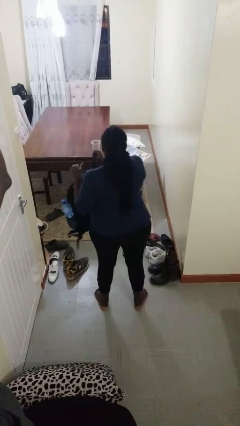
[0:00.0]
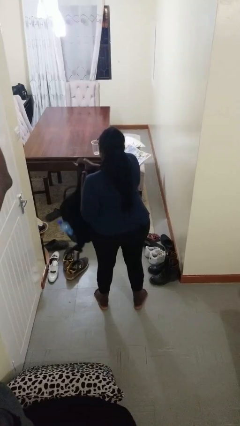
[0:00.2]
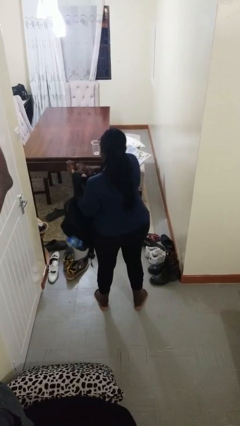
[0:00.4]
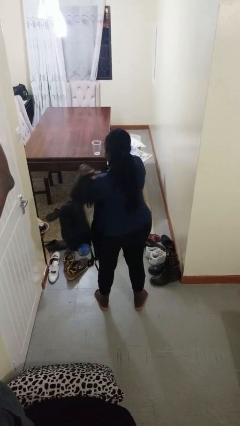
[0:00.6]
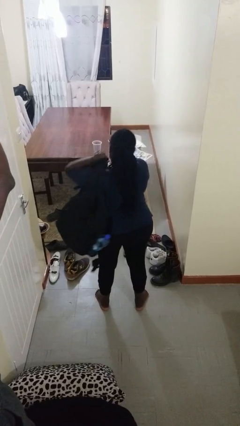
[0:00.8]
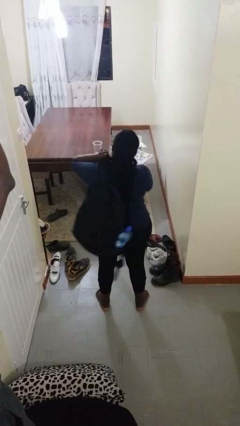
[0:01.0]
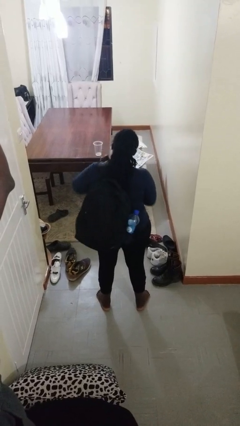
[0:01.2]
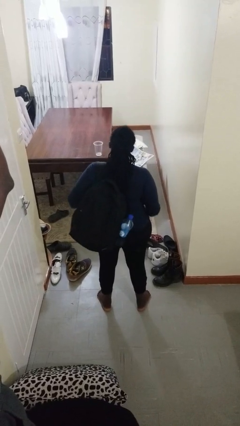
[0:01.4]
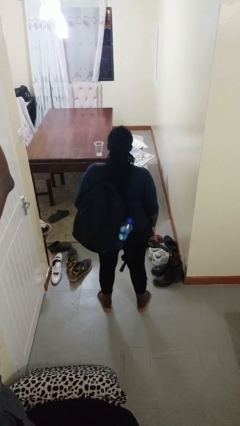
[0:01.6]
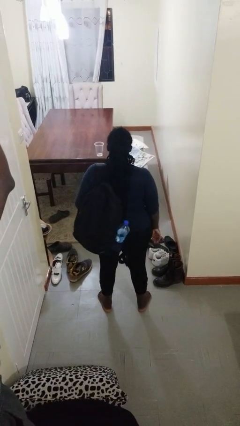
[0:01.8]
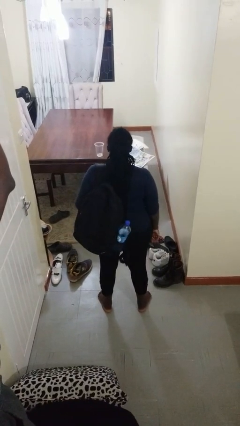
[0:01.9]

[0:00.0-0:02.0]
person puts on backpack

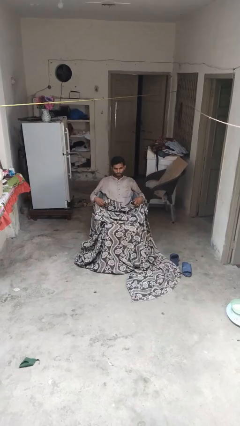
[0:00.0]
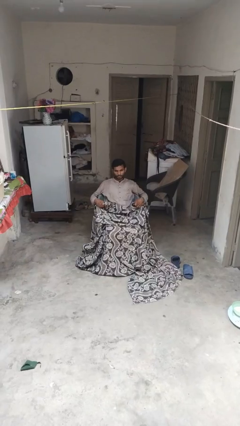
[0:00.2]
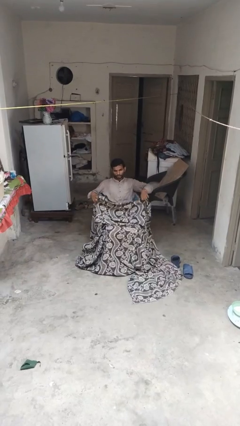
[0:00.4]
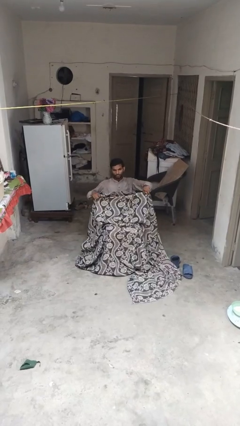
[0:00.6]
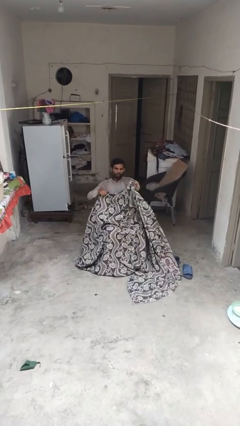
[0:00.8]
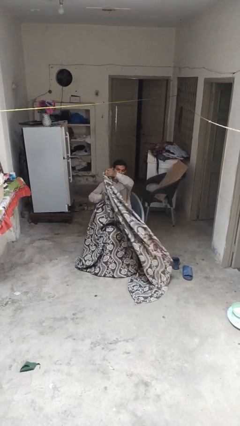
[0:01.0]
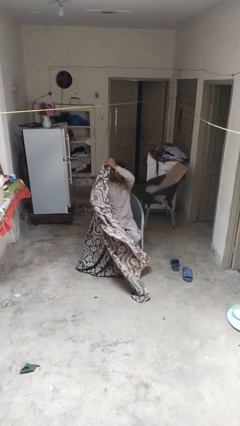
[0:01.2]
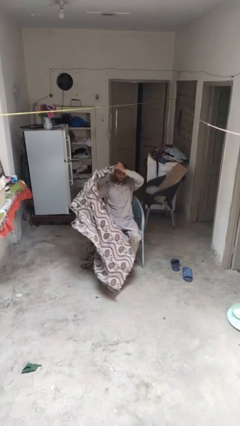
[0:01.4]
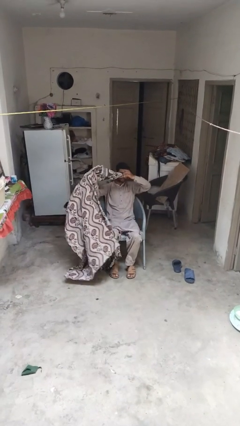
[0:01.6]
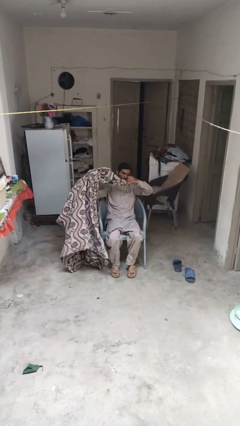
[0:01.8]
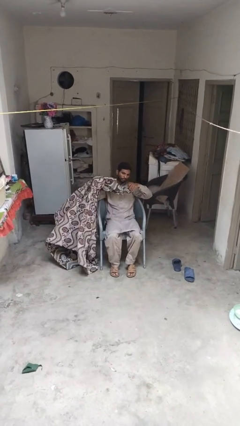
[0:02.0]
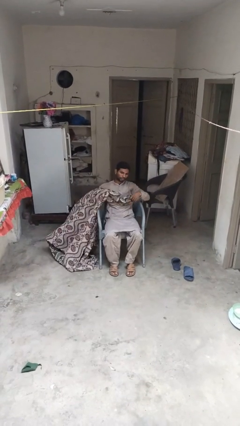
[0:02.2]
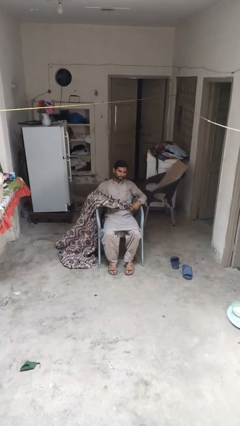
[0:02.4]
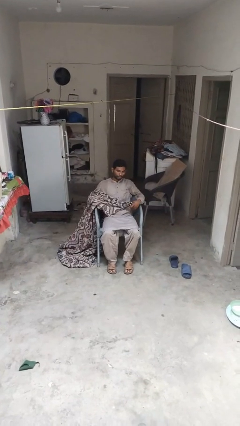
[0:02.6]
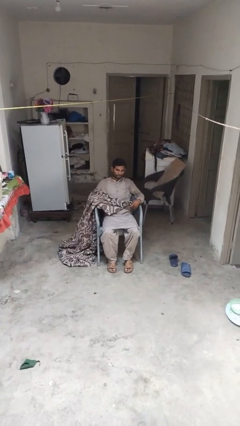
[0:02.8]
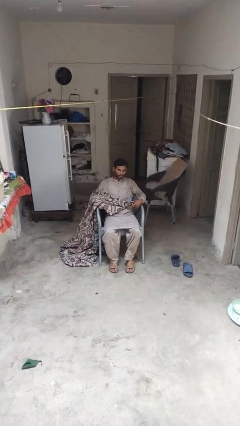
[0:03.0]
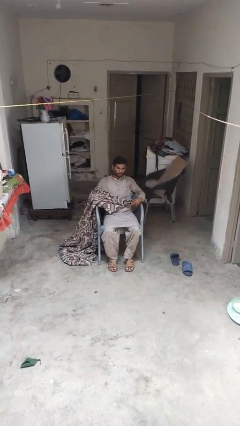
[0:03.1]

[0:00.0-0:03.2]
person uncovers with blanket

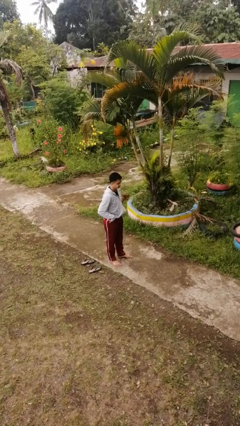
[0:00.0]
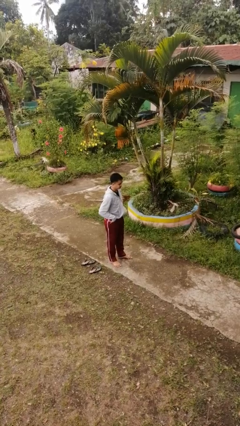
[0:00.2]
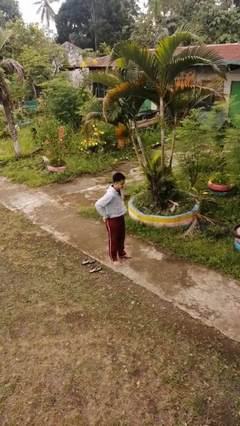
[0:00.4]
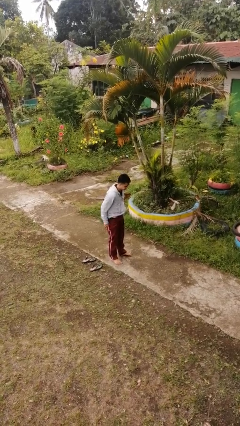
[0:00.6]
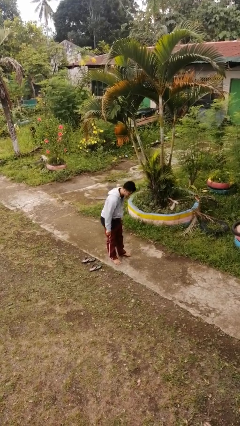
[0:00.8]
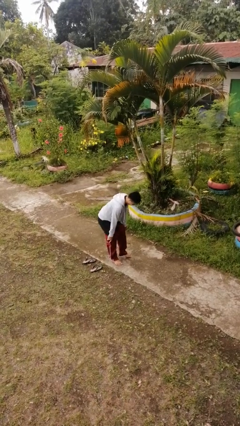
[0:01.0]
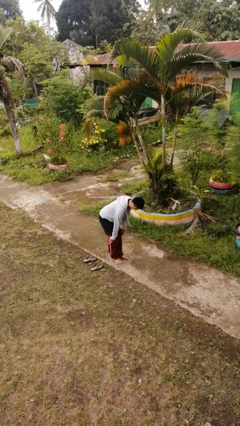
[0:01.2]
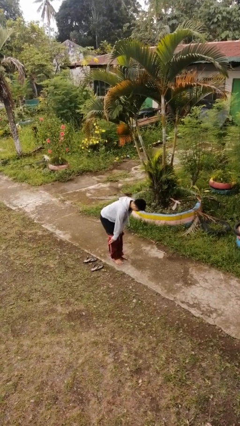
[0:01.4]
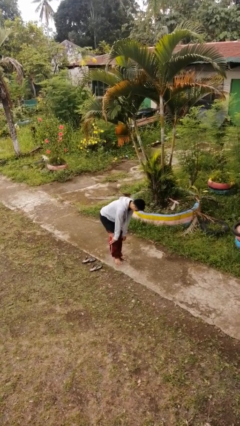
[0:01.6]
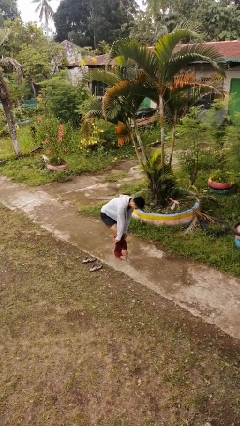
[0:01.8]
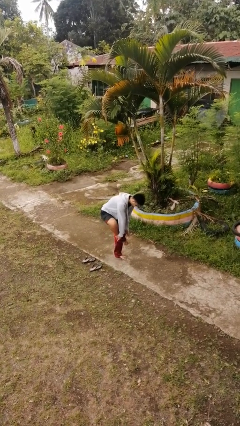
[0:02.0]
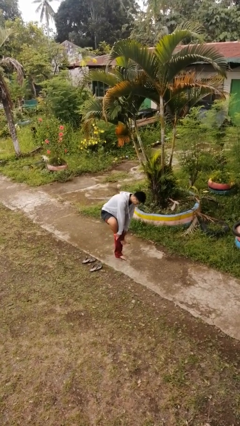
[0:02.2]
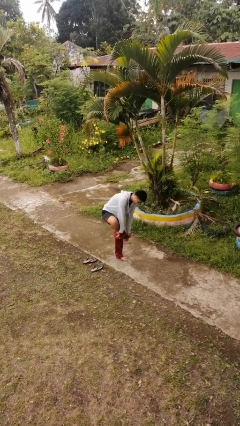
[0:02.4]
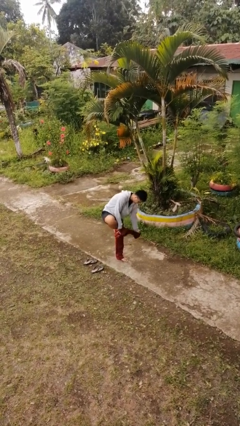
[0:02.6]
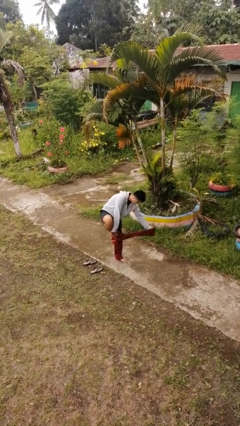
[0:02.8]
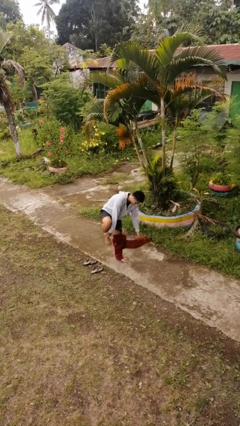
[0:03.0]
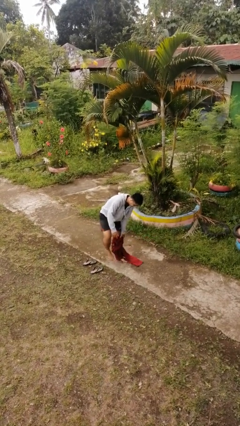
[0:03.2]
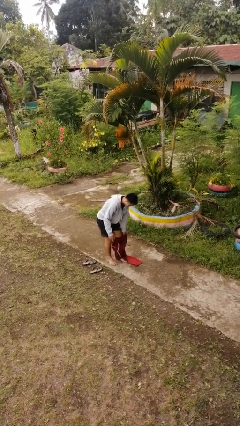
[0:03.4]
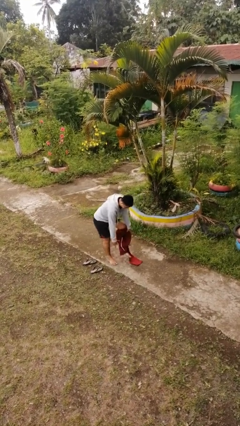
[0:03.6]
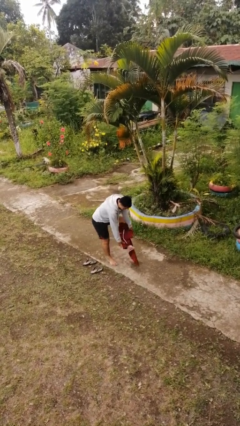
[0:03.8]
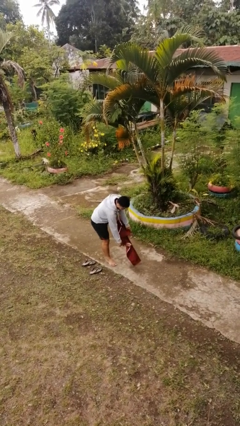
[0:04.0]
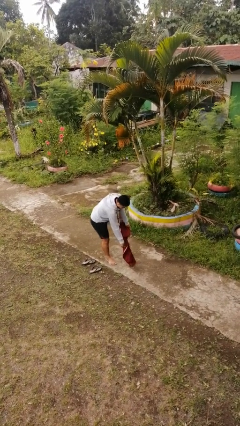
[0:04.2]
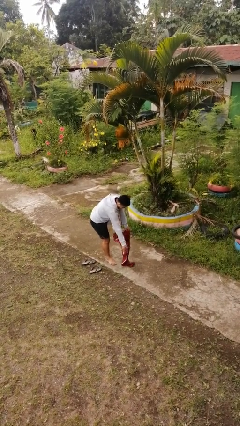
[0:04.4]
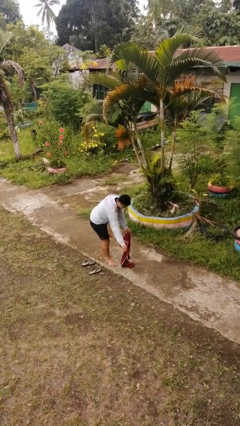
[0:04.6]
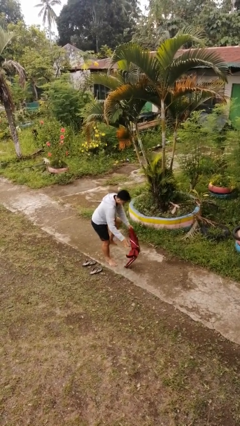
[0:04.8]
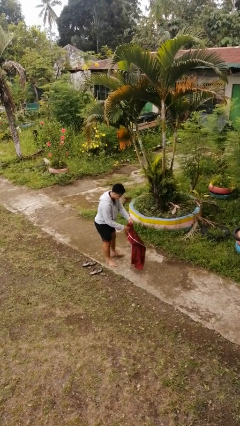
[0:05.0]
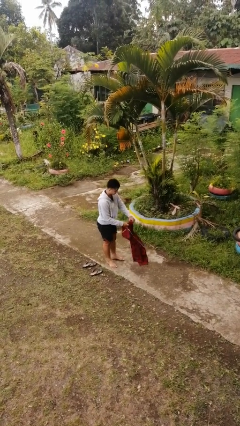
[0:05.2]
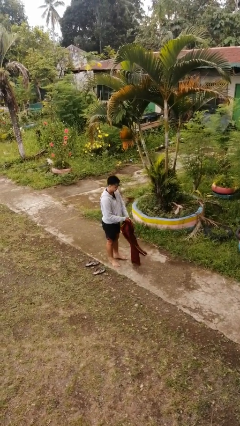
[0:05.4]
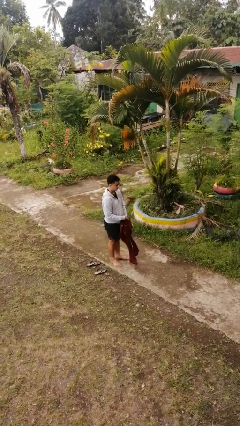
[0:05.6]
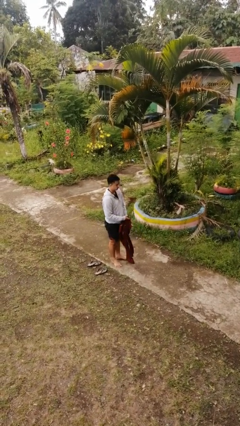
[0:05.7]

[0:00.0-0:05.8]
person puts on pants

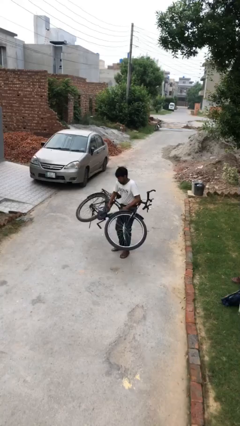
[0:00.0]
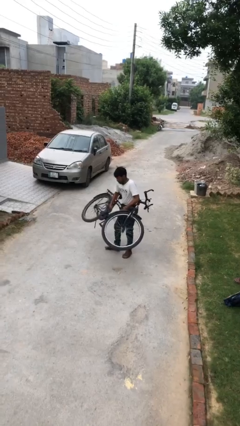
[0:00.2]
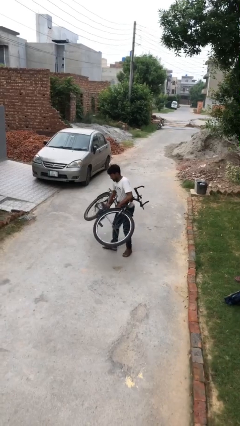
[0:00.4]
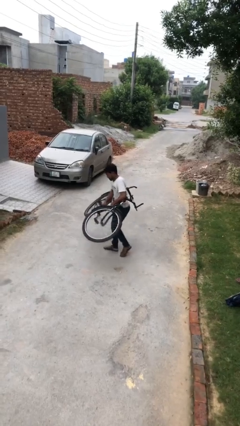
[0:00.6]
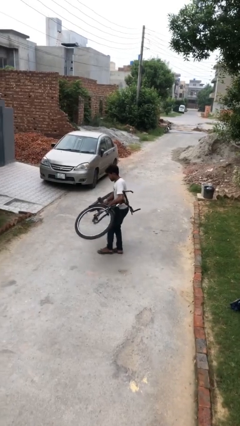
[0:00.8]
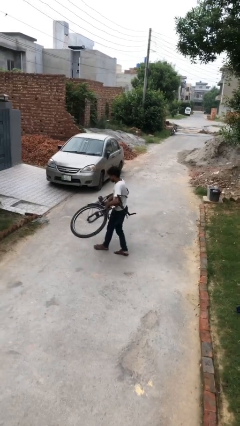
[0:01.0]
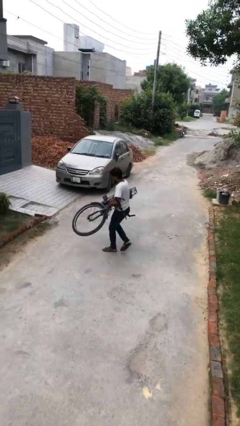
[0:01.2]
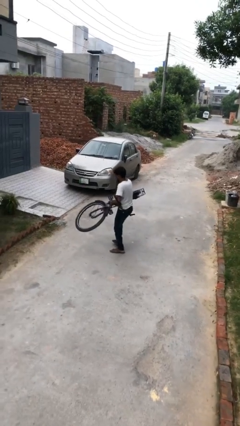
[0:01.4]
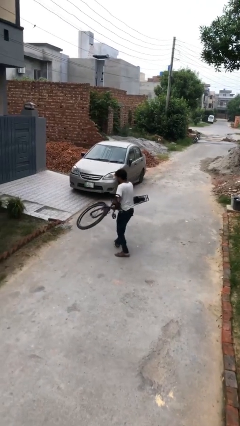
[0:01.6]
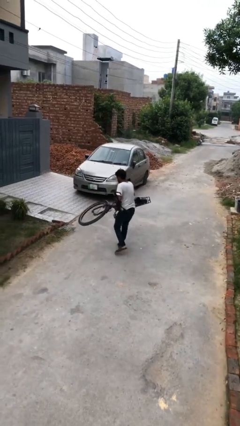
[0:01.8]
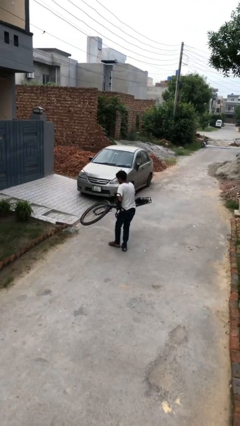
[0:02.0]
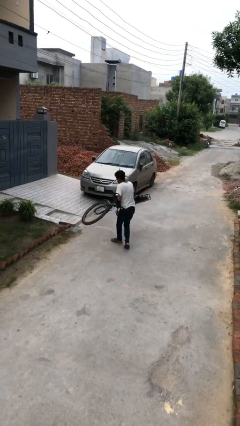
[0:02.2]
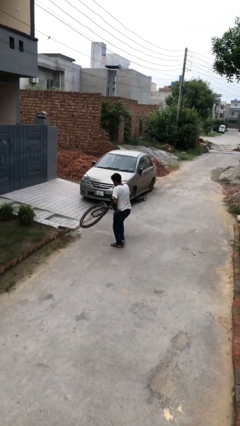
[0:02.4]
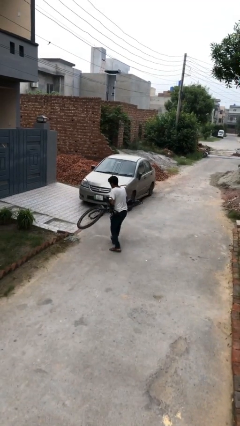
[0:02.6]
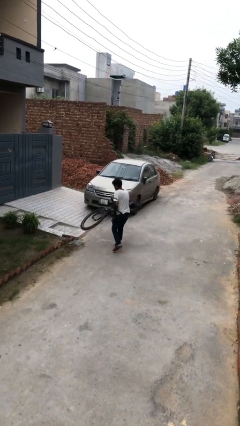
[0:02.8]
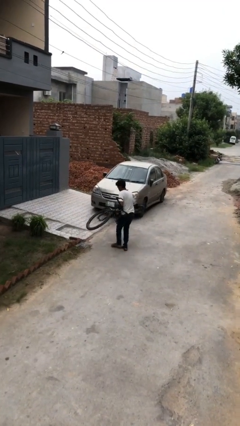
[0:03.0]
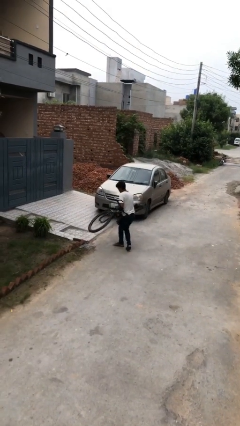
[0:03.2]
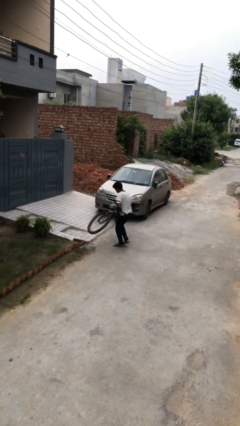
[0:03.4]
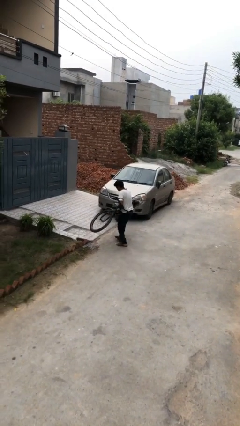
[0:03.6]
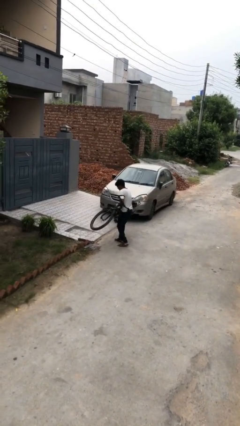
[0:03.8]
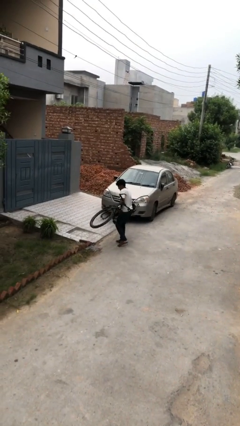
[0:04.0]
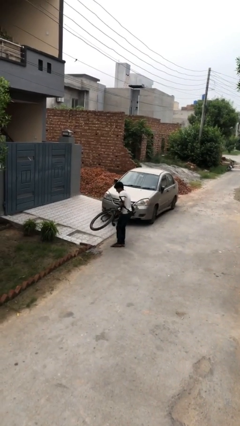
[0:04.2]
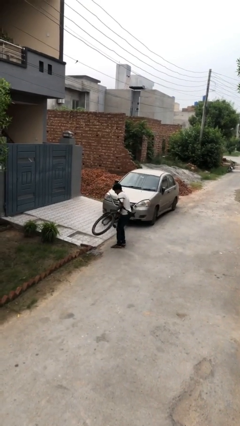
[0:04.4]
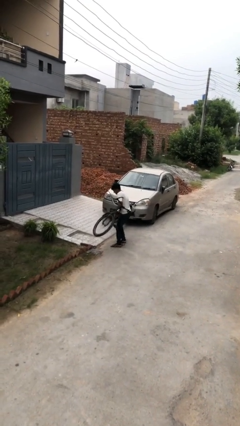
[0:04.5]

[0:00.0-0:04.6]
person carries heavy object

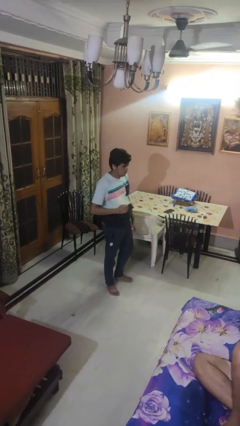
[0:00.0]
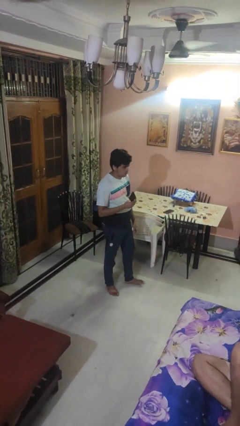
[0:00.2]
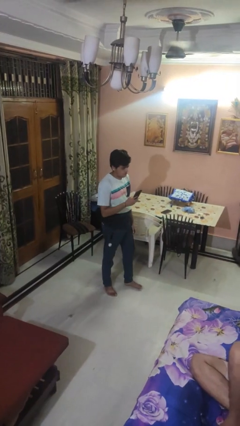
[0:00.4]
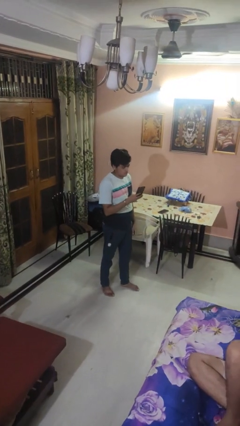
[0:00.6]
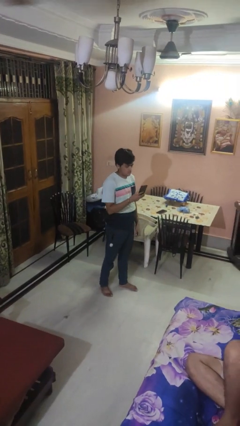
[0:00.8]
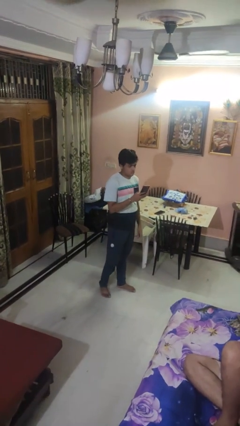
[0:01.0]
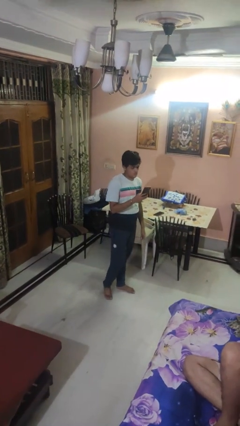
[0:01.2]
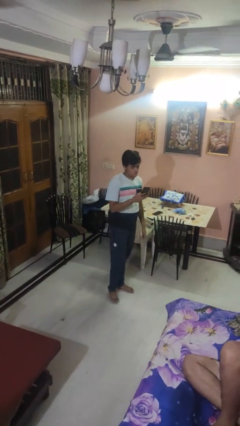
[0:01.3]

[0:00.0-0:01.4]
person takes phone from pocket
